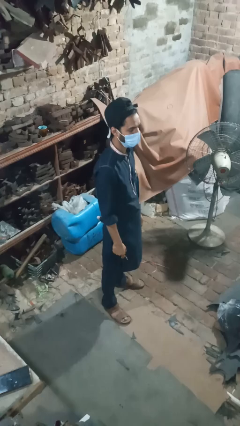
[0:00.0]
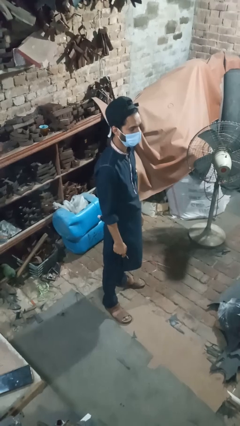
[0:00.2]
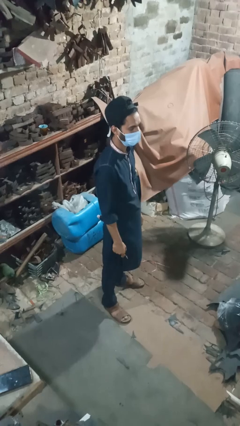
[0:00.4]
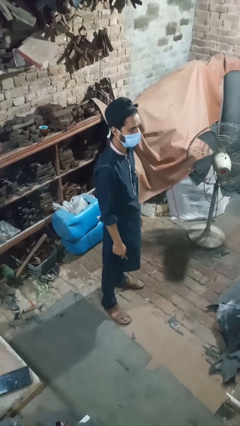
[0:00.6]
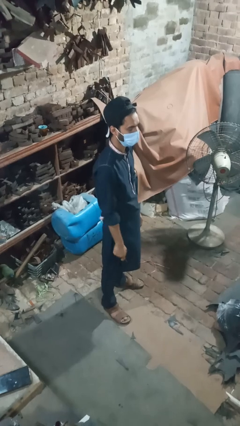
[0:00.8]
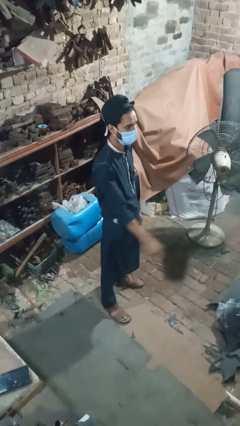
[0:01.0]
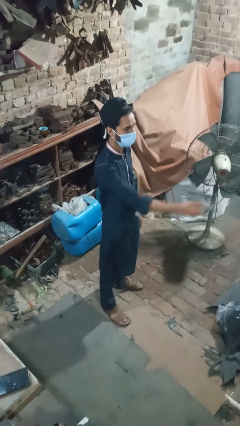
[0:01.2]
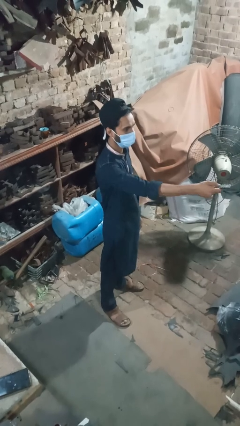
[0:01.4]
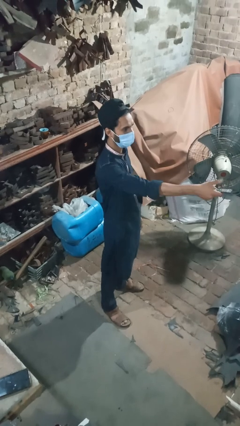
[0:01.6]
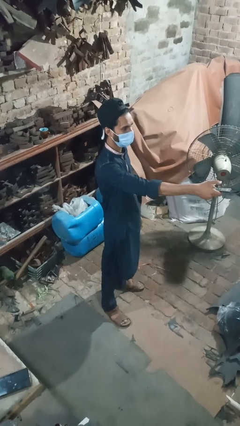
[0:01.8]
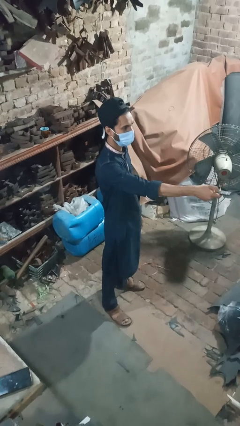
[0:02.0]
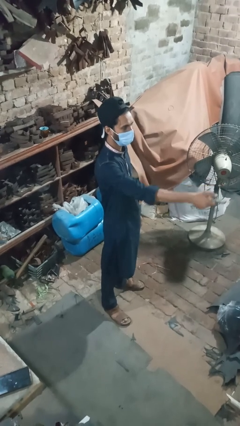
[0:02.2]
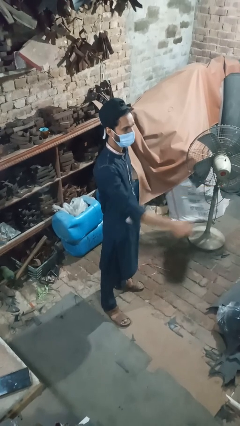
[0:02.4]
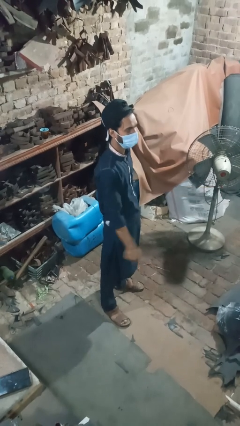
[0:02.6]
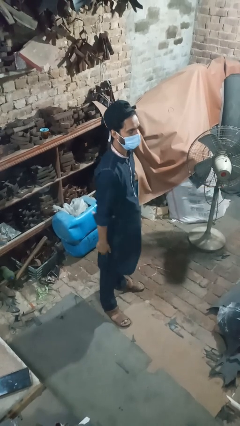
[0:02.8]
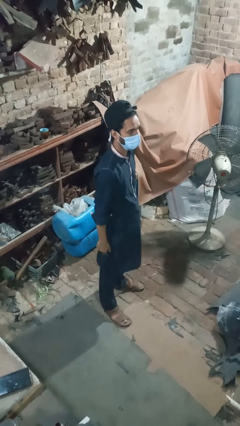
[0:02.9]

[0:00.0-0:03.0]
person uses television remote

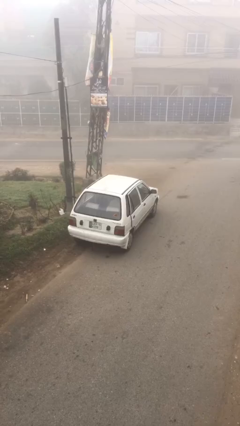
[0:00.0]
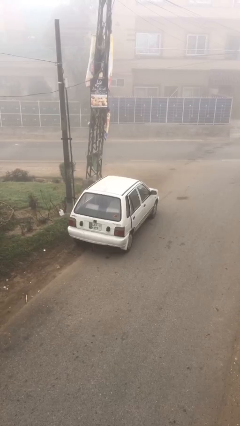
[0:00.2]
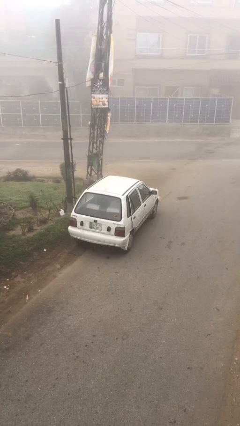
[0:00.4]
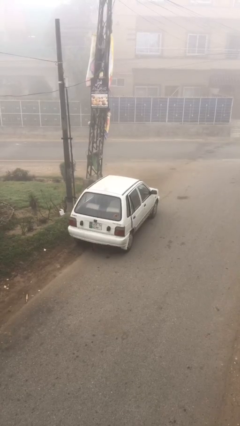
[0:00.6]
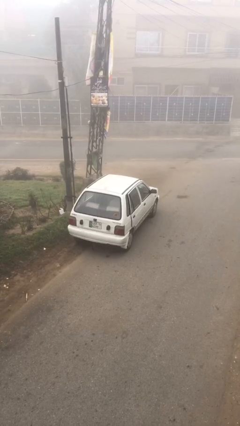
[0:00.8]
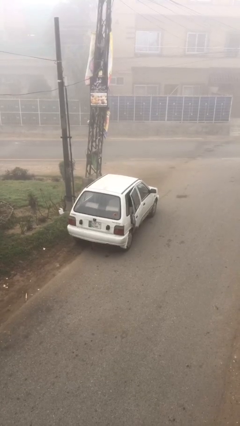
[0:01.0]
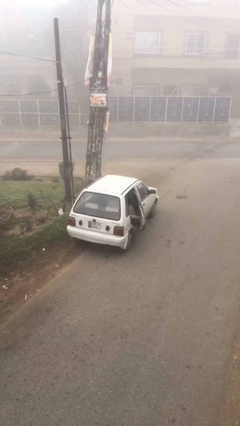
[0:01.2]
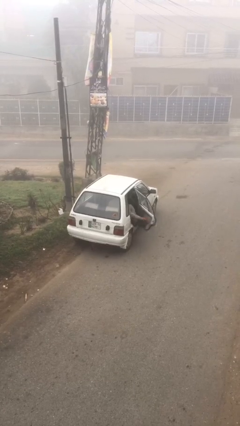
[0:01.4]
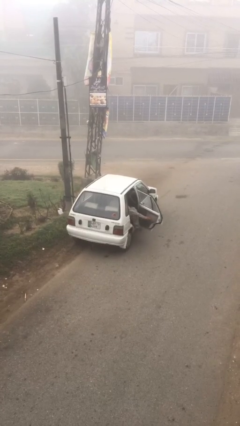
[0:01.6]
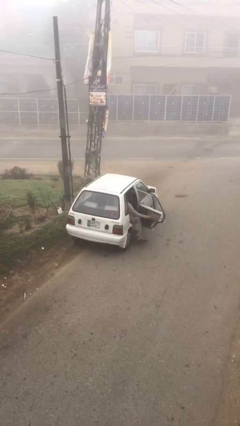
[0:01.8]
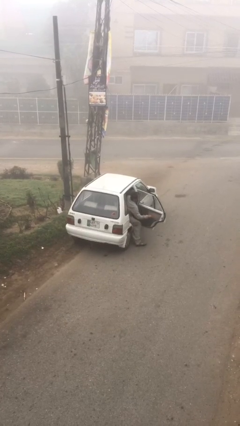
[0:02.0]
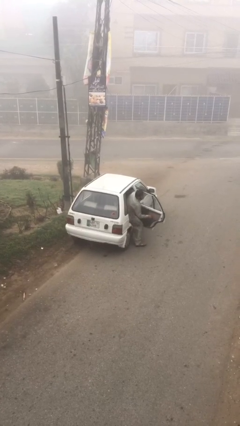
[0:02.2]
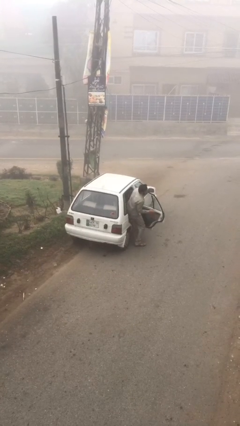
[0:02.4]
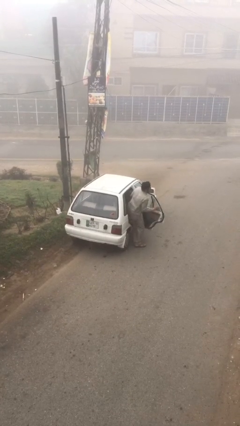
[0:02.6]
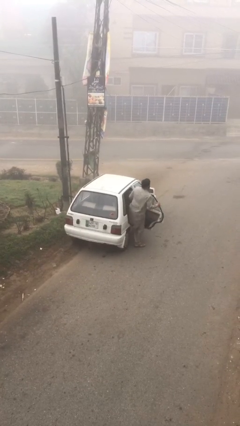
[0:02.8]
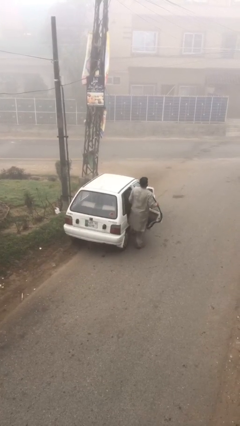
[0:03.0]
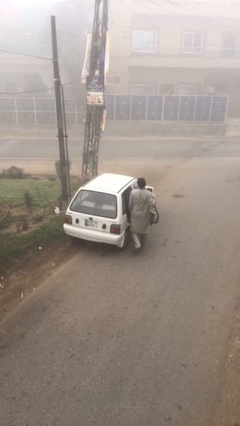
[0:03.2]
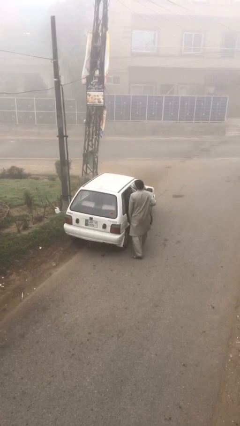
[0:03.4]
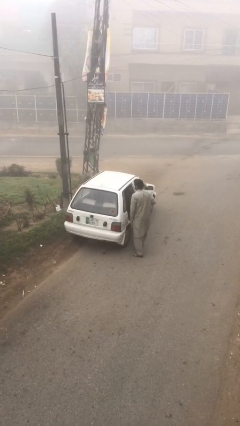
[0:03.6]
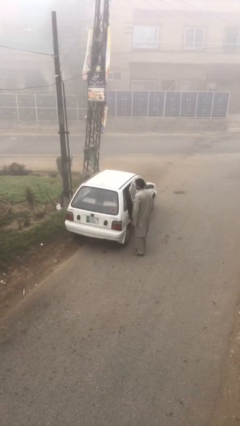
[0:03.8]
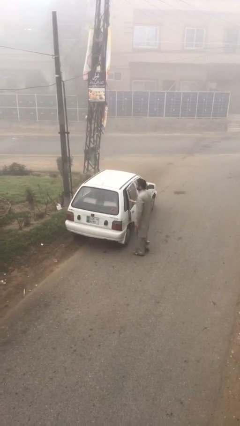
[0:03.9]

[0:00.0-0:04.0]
car drops off person

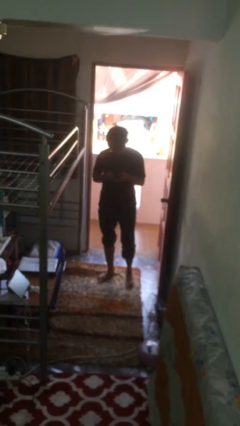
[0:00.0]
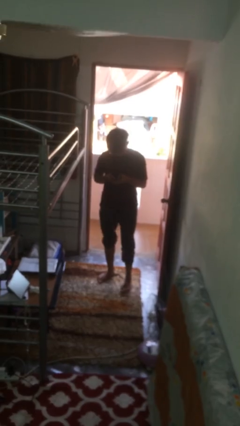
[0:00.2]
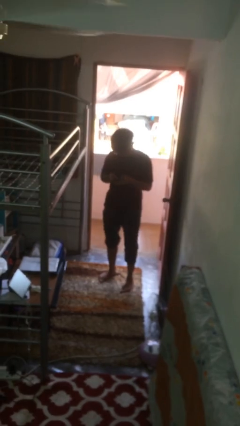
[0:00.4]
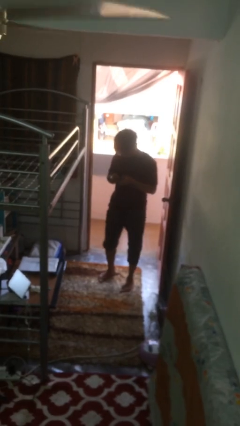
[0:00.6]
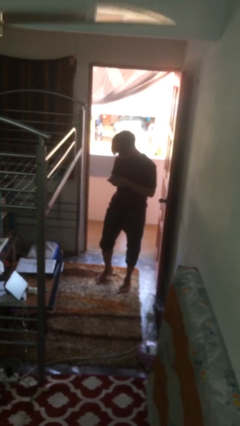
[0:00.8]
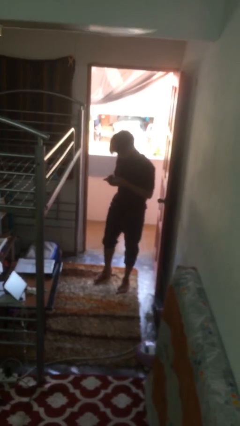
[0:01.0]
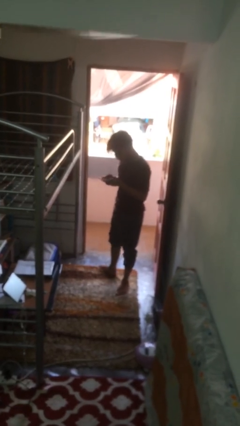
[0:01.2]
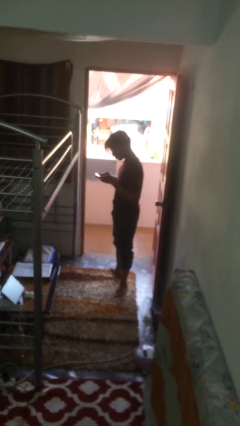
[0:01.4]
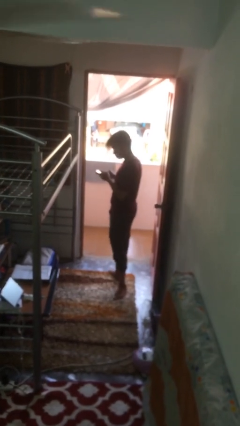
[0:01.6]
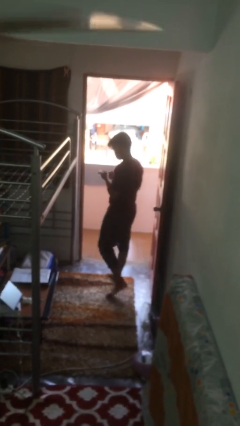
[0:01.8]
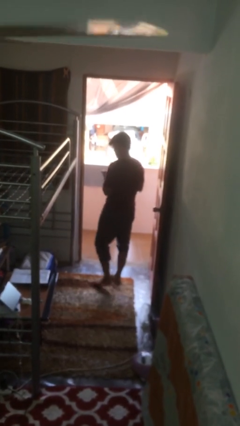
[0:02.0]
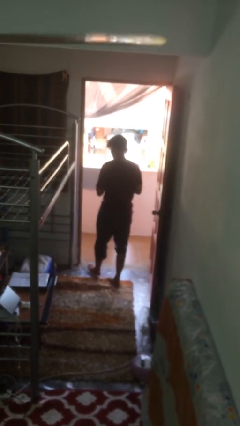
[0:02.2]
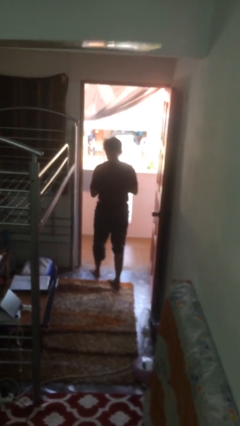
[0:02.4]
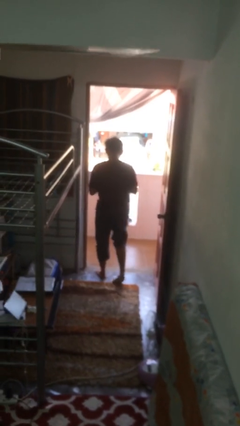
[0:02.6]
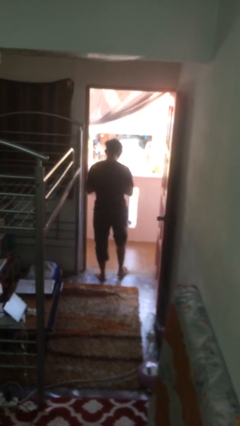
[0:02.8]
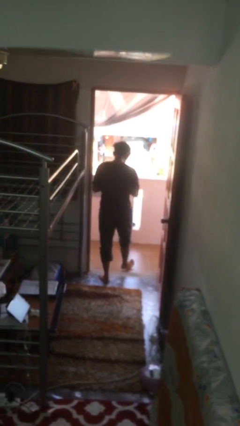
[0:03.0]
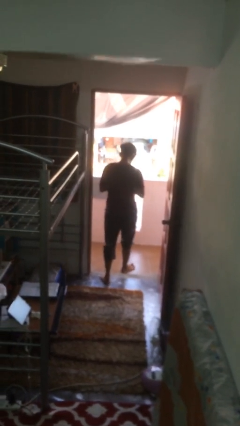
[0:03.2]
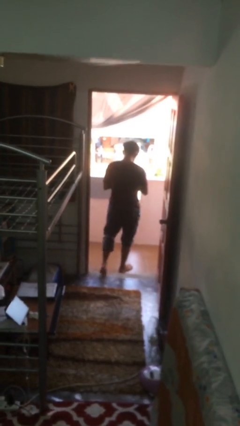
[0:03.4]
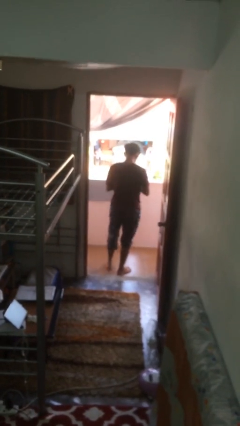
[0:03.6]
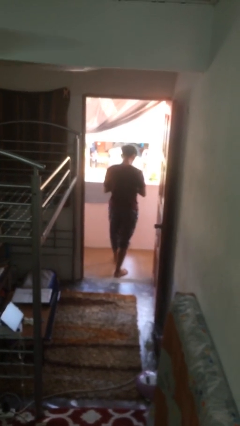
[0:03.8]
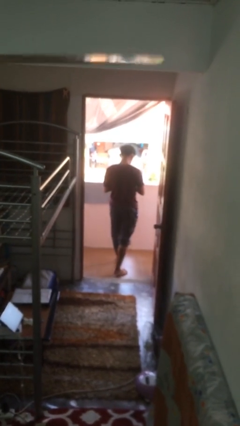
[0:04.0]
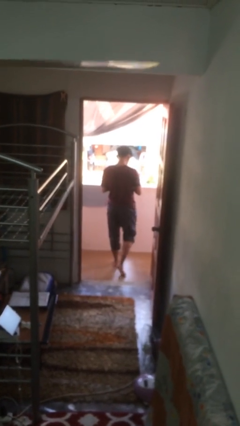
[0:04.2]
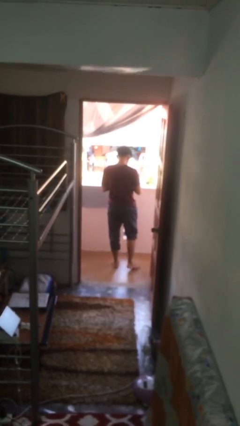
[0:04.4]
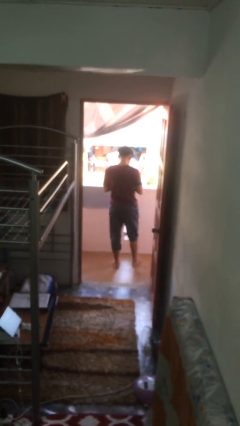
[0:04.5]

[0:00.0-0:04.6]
person exits scene through structure

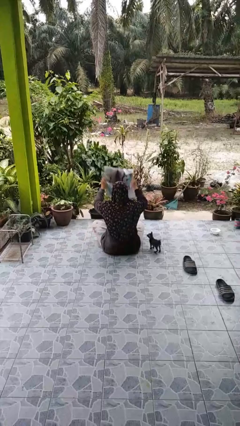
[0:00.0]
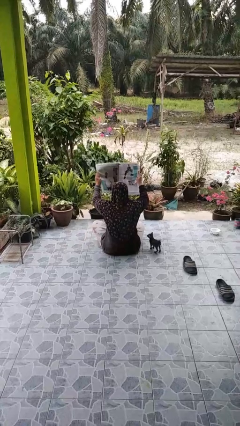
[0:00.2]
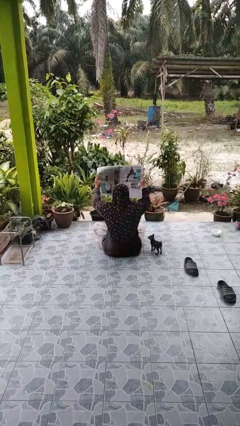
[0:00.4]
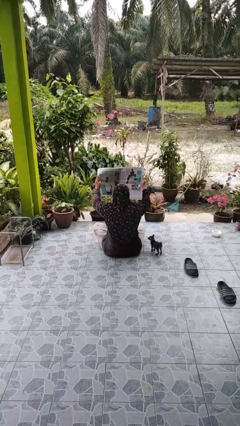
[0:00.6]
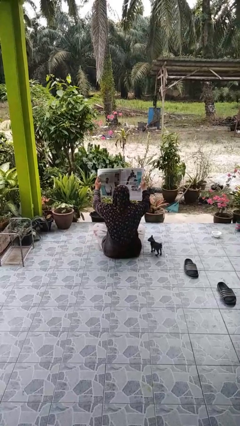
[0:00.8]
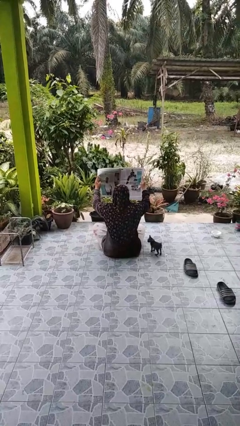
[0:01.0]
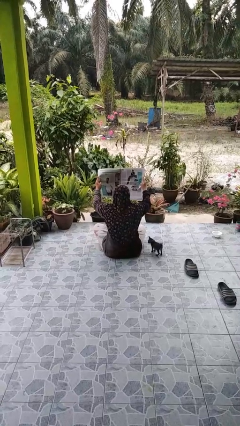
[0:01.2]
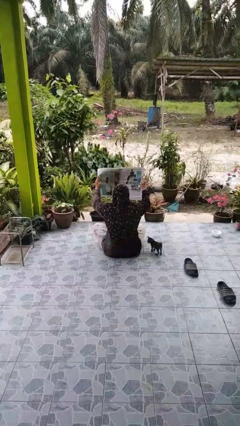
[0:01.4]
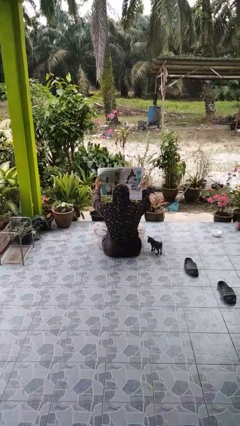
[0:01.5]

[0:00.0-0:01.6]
person reads newspaper

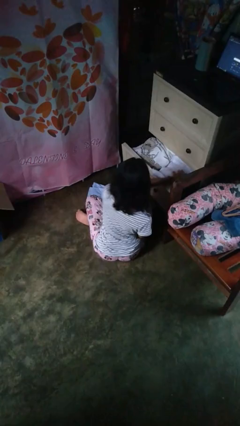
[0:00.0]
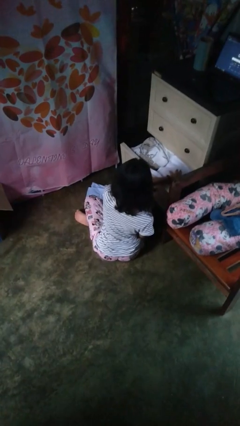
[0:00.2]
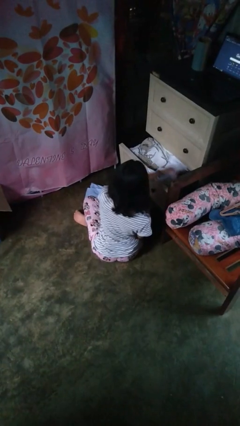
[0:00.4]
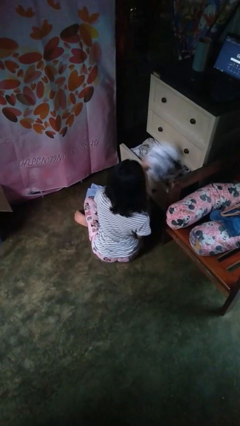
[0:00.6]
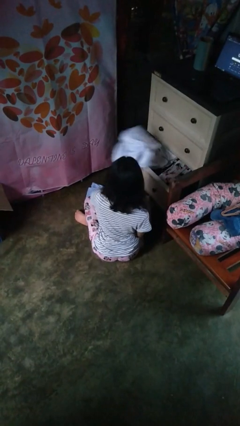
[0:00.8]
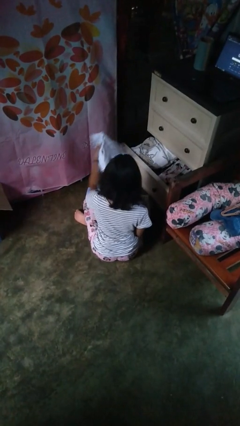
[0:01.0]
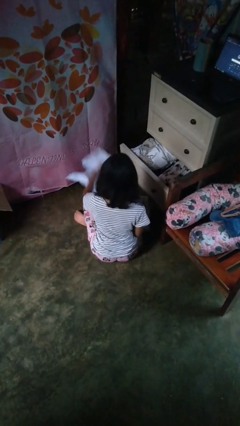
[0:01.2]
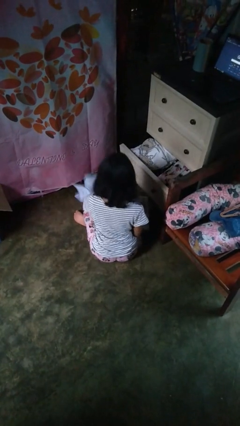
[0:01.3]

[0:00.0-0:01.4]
person takes clothes from dresser

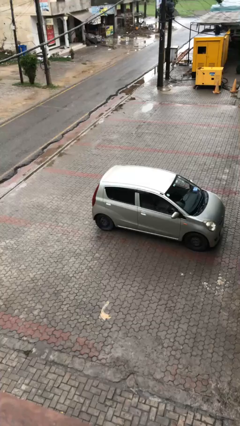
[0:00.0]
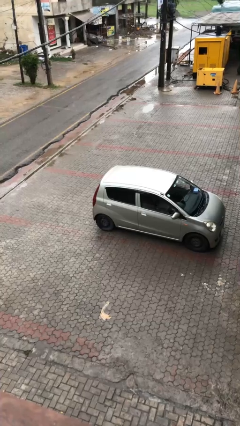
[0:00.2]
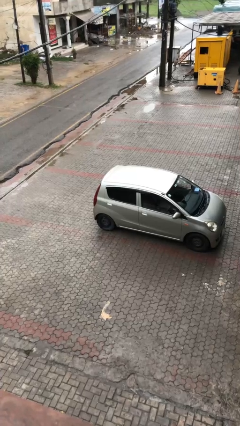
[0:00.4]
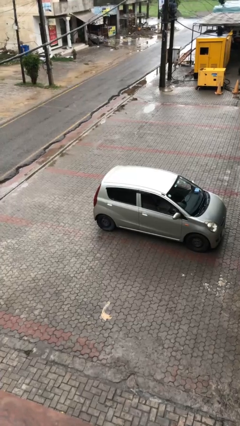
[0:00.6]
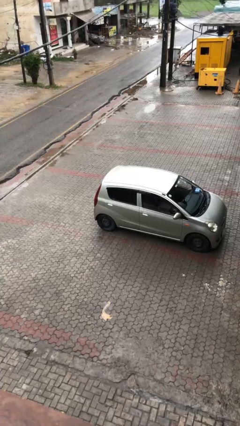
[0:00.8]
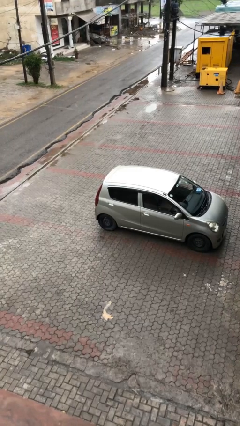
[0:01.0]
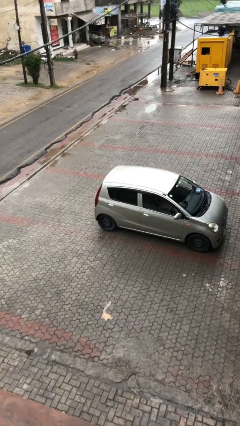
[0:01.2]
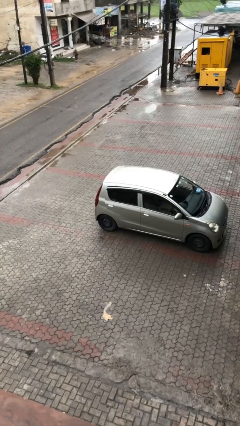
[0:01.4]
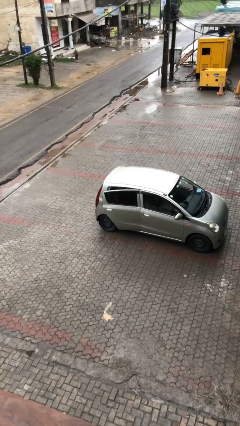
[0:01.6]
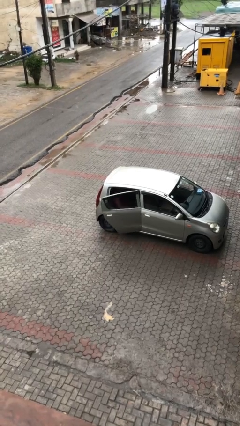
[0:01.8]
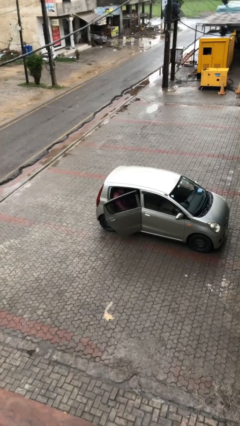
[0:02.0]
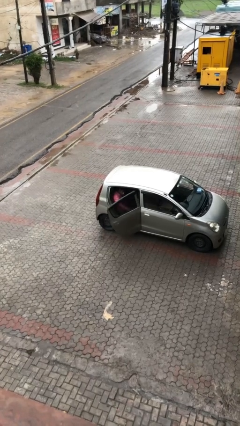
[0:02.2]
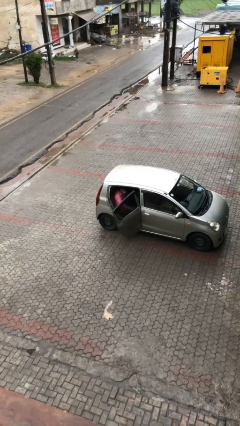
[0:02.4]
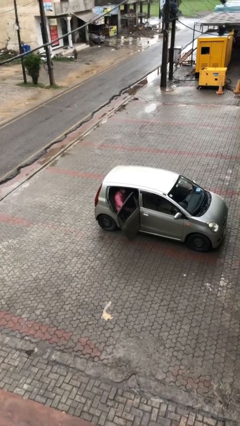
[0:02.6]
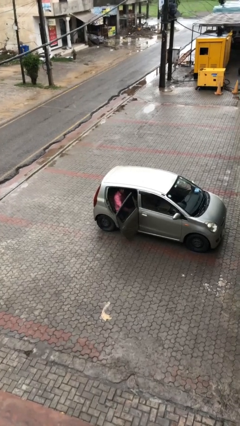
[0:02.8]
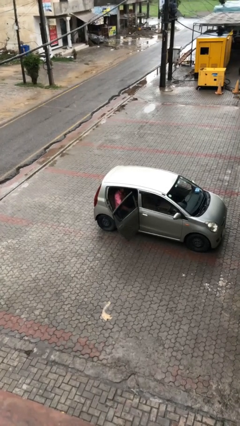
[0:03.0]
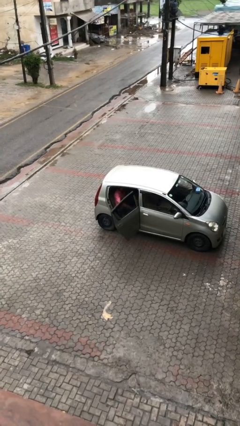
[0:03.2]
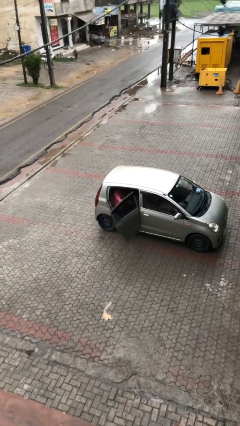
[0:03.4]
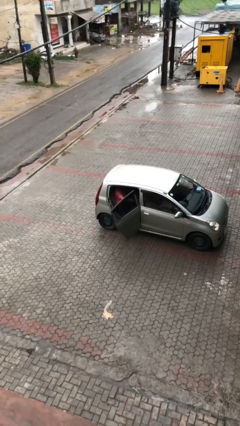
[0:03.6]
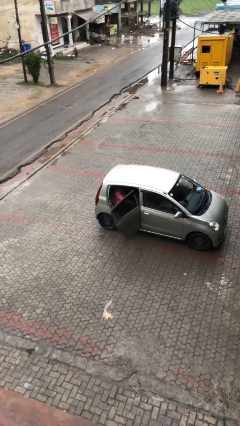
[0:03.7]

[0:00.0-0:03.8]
person opens car door
